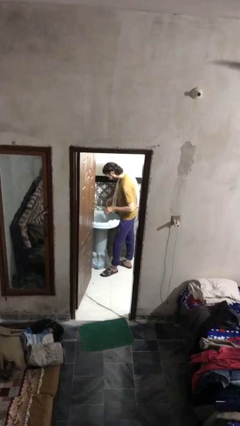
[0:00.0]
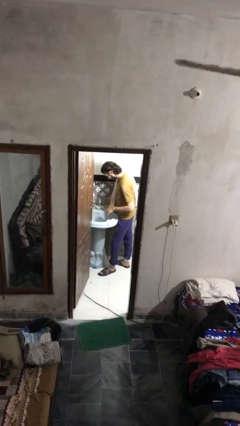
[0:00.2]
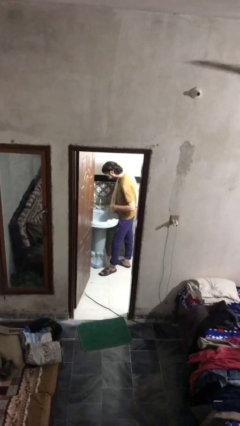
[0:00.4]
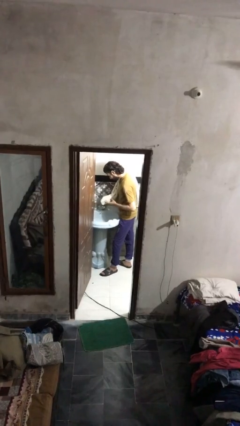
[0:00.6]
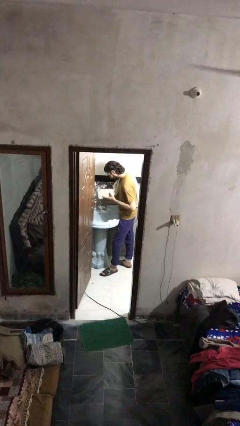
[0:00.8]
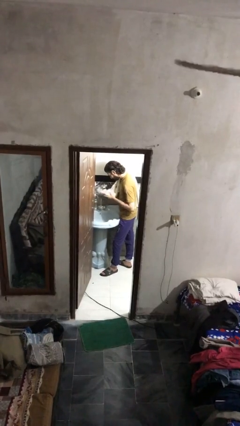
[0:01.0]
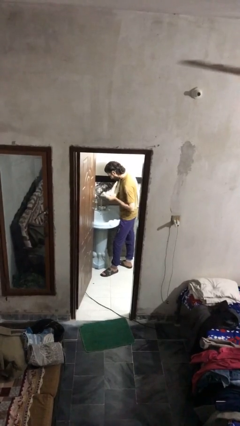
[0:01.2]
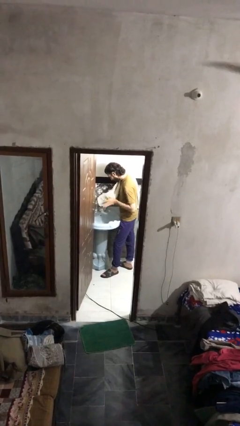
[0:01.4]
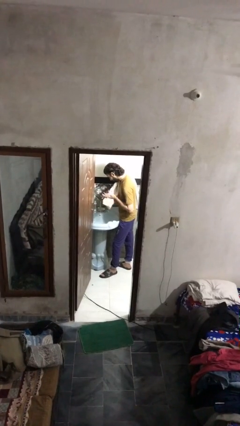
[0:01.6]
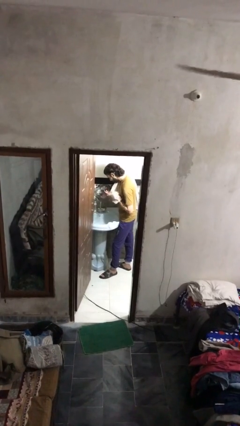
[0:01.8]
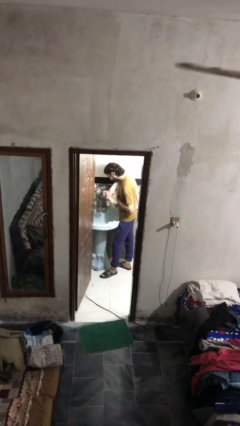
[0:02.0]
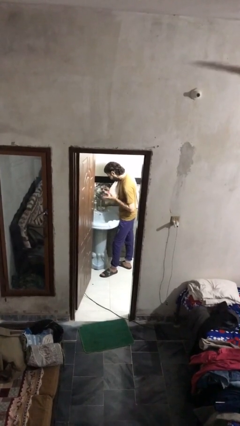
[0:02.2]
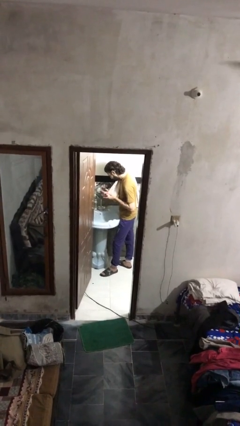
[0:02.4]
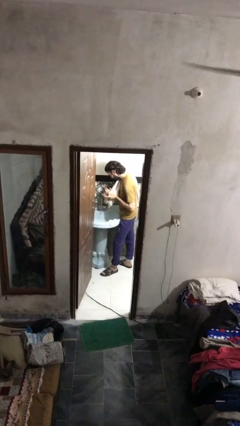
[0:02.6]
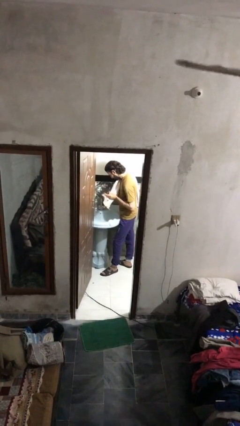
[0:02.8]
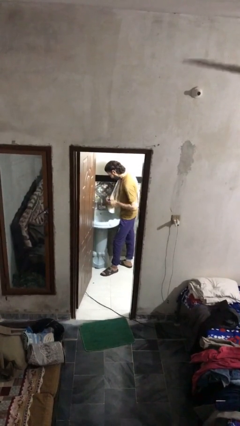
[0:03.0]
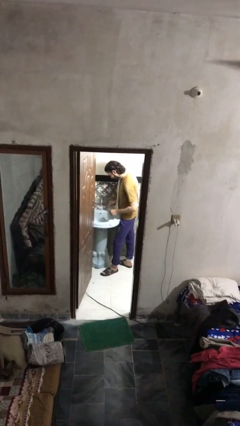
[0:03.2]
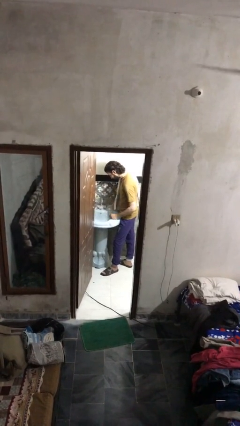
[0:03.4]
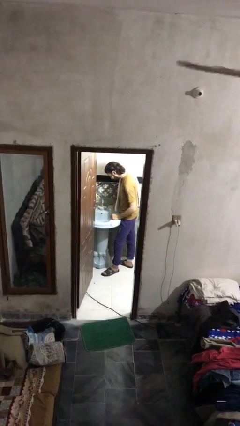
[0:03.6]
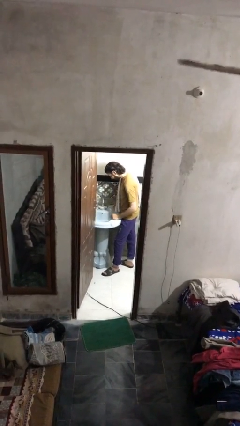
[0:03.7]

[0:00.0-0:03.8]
person dries hands with towel

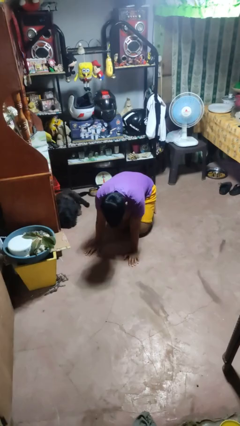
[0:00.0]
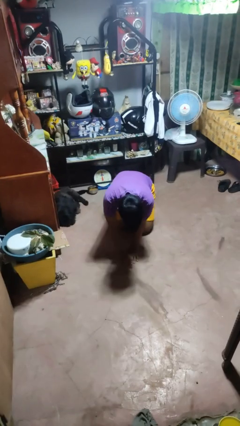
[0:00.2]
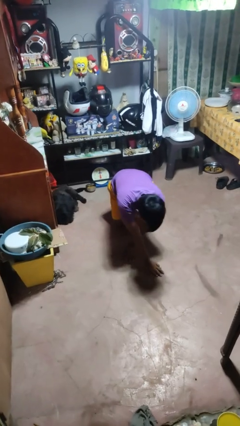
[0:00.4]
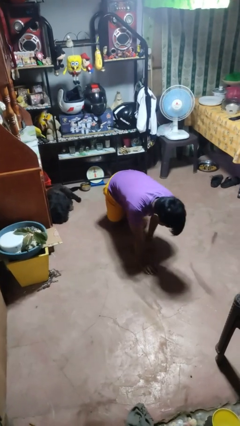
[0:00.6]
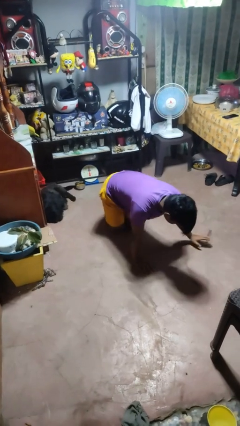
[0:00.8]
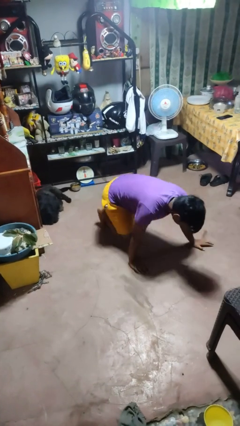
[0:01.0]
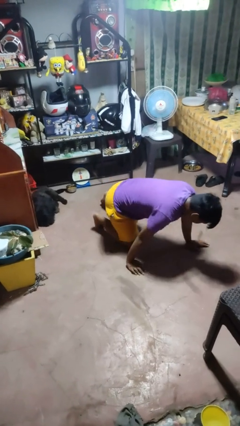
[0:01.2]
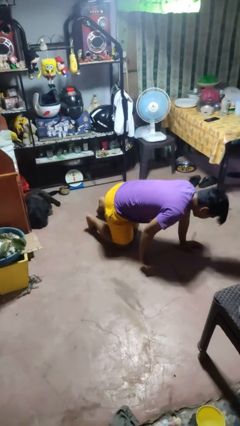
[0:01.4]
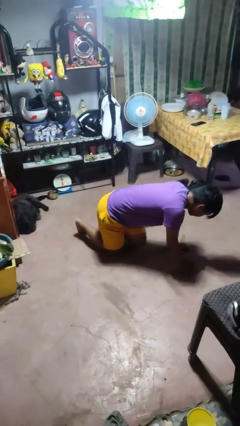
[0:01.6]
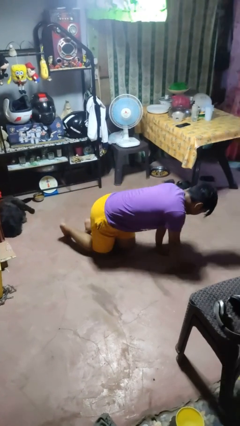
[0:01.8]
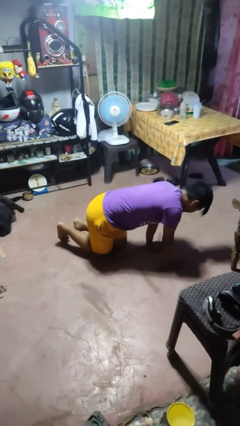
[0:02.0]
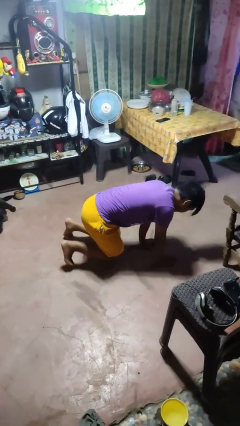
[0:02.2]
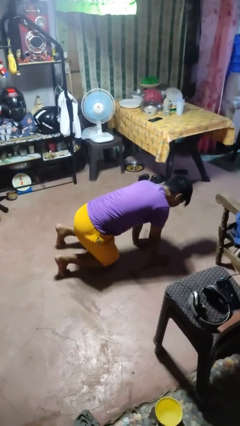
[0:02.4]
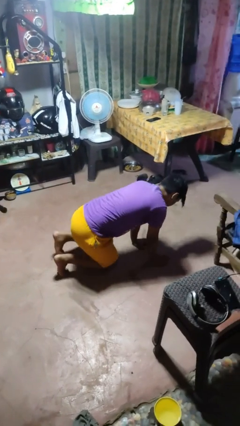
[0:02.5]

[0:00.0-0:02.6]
person crawls

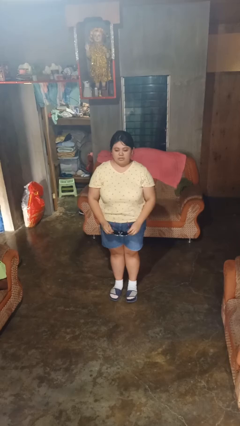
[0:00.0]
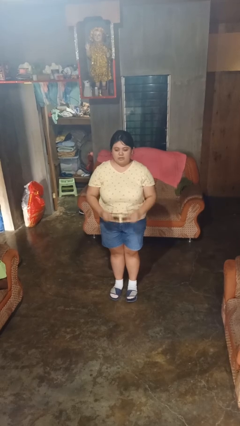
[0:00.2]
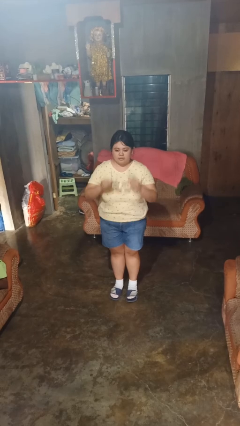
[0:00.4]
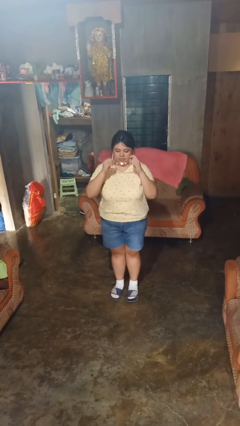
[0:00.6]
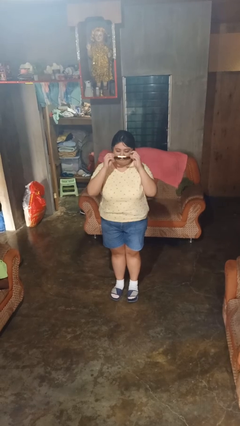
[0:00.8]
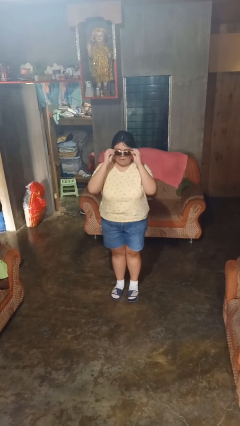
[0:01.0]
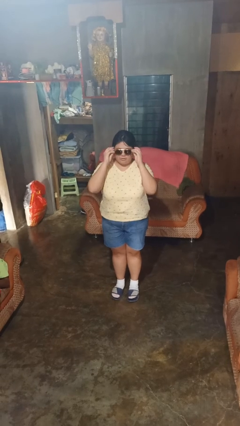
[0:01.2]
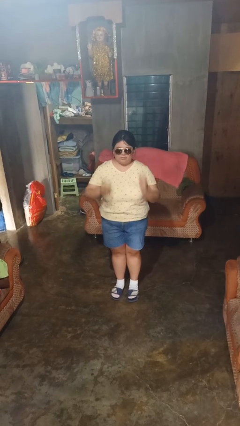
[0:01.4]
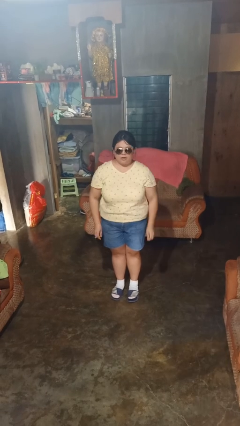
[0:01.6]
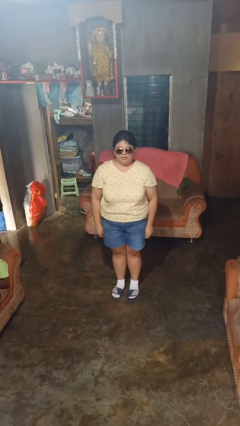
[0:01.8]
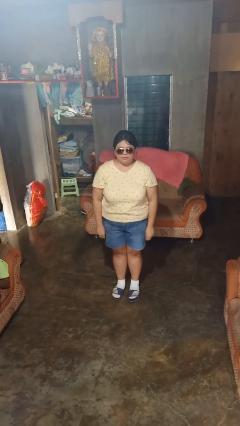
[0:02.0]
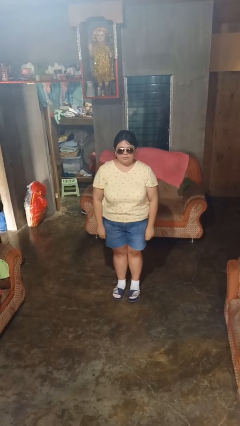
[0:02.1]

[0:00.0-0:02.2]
person puts on sunglasses

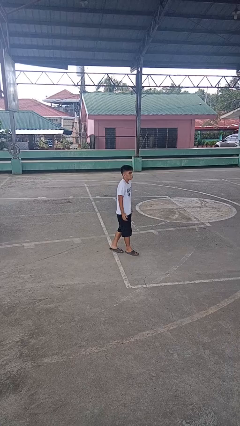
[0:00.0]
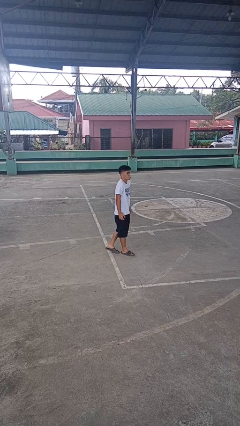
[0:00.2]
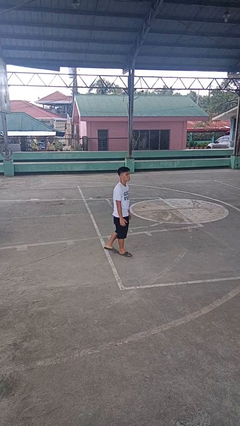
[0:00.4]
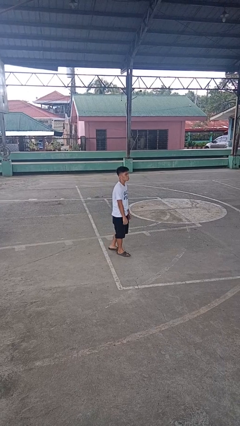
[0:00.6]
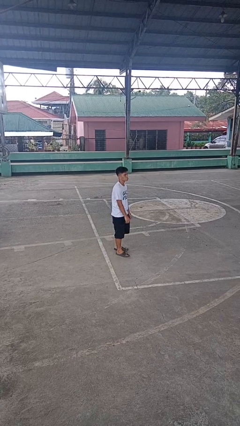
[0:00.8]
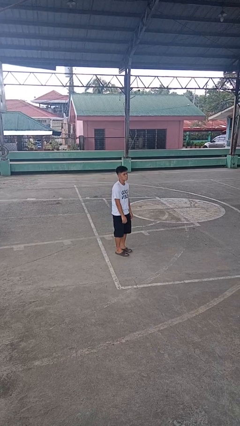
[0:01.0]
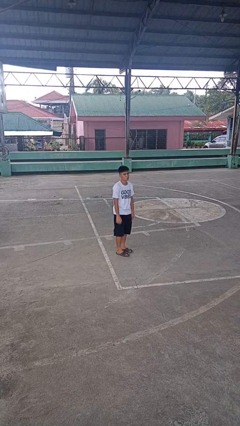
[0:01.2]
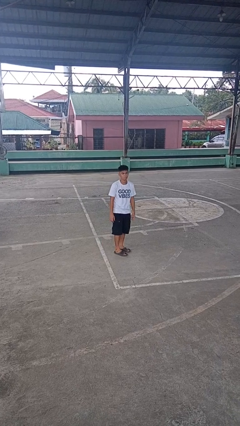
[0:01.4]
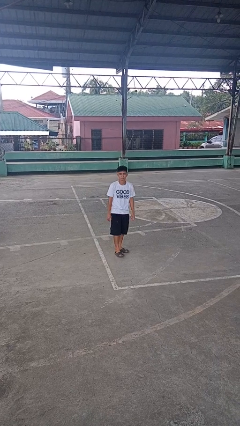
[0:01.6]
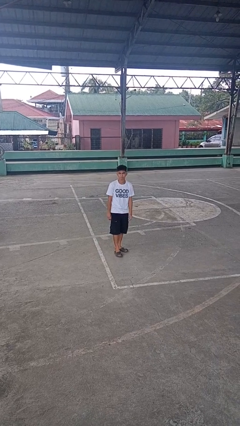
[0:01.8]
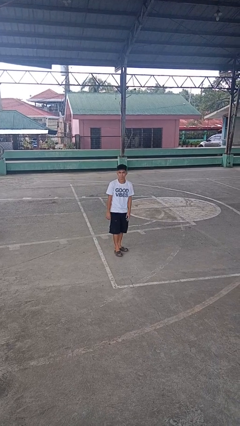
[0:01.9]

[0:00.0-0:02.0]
person shrugs

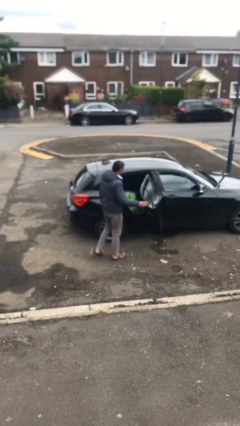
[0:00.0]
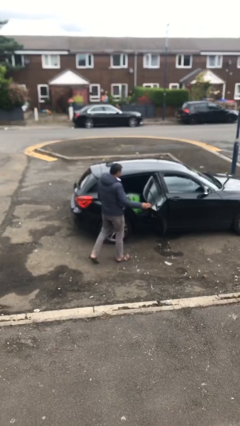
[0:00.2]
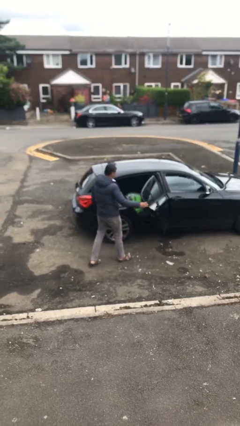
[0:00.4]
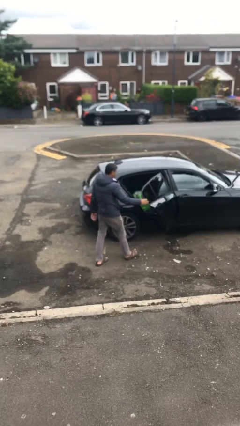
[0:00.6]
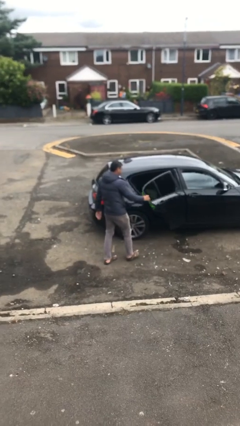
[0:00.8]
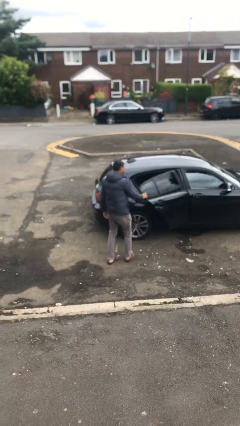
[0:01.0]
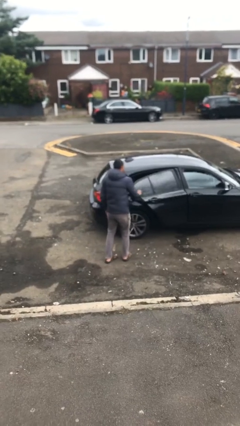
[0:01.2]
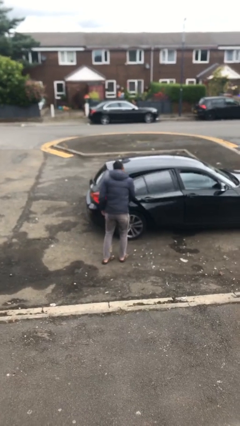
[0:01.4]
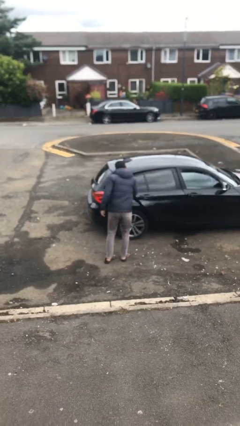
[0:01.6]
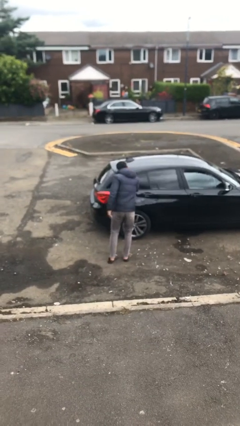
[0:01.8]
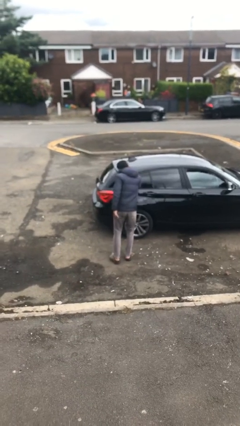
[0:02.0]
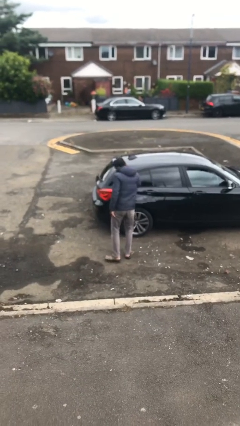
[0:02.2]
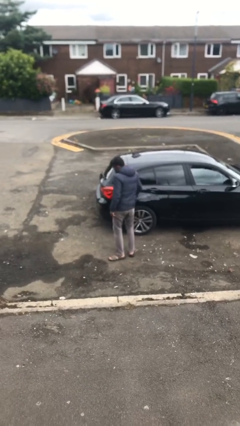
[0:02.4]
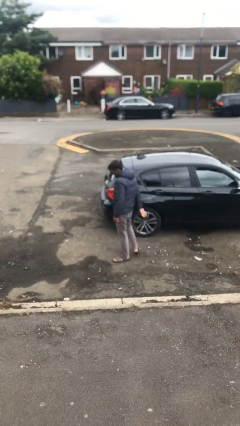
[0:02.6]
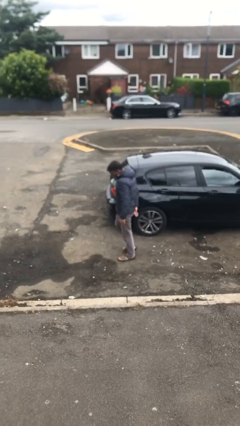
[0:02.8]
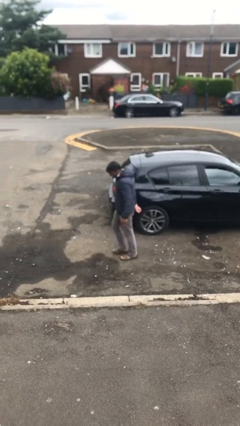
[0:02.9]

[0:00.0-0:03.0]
person closes car door

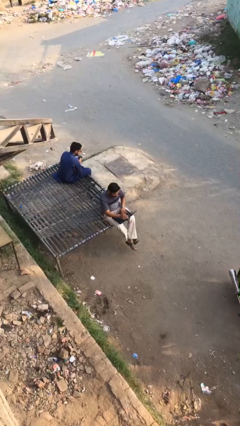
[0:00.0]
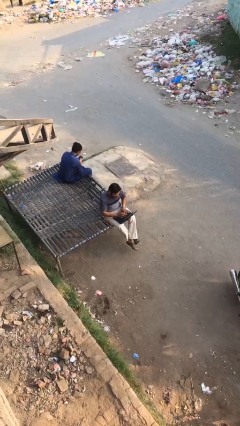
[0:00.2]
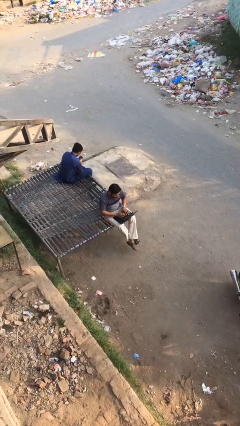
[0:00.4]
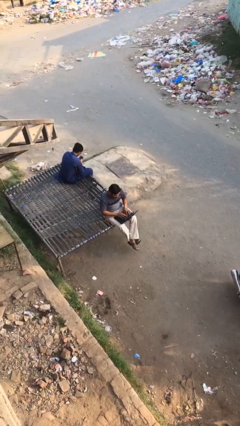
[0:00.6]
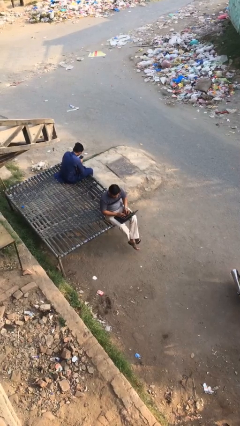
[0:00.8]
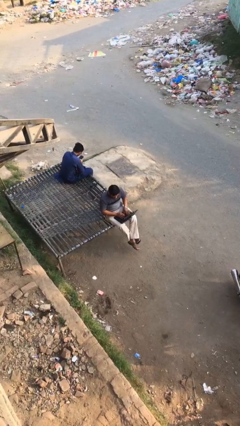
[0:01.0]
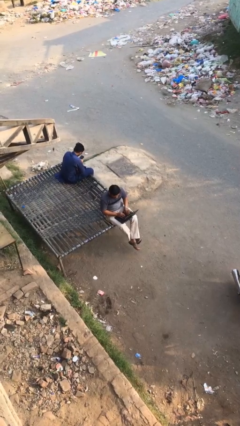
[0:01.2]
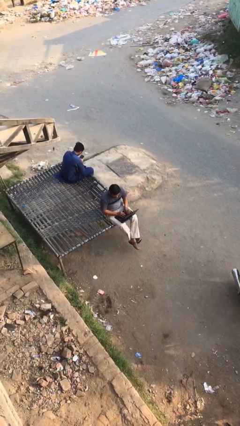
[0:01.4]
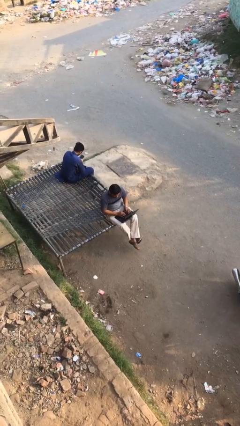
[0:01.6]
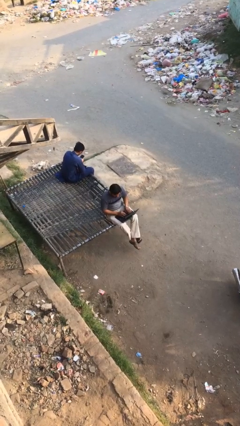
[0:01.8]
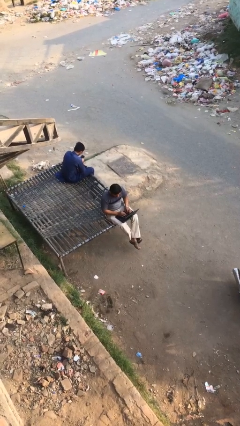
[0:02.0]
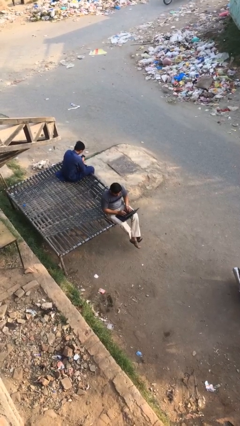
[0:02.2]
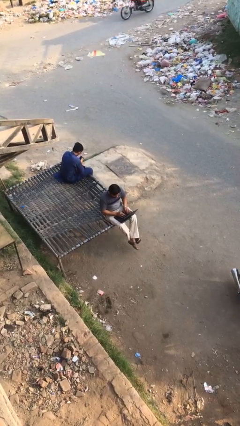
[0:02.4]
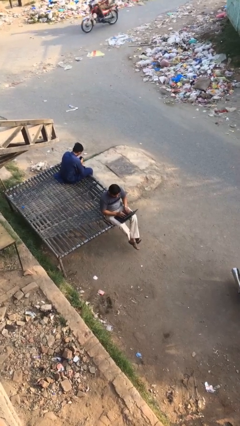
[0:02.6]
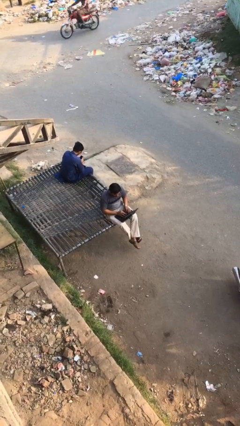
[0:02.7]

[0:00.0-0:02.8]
person interacts with laptop

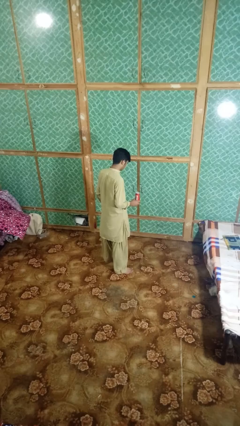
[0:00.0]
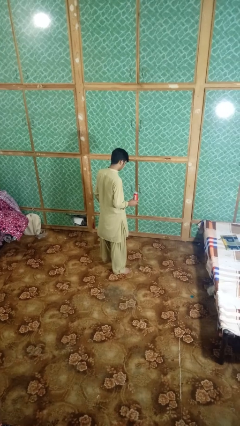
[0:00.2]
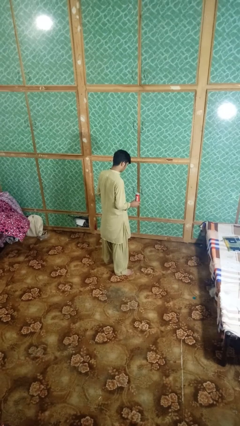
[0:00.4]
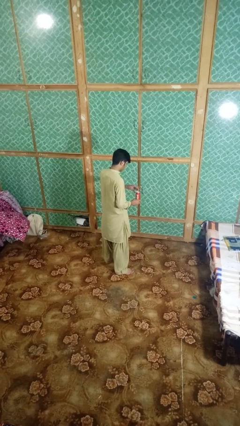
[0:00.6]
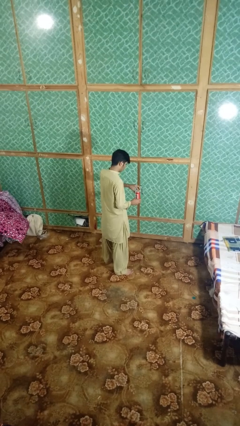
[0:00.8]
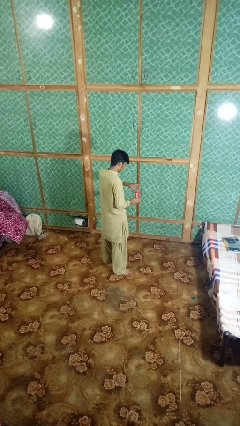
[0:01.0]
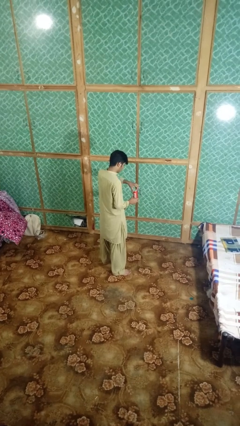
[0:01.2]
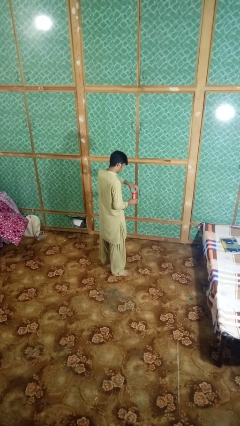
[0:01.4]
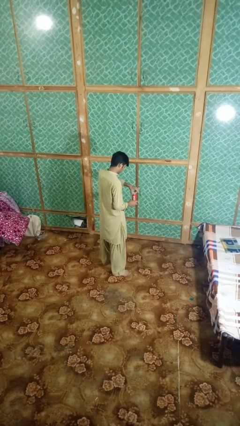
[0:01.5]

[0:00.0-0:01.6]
person opens can with can opener
